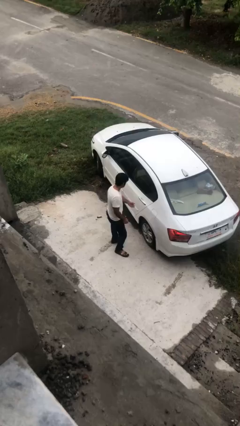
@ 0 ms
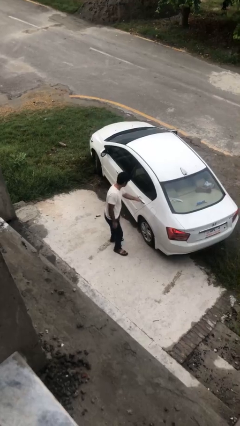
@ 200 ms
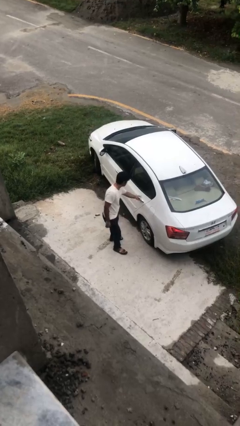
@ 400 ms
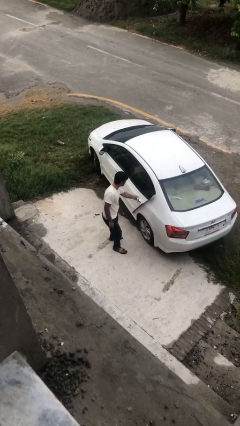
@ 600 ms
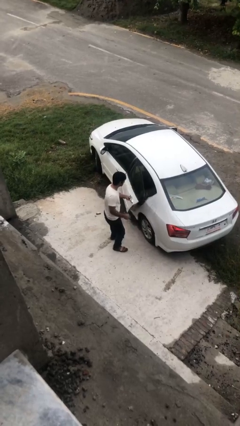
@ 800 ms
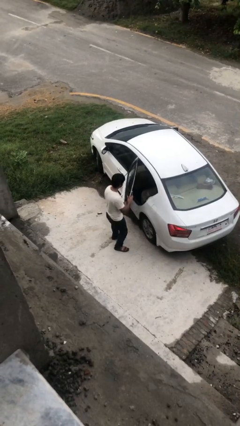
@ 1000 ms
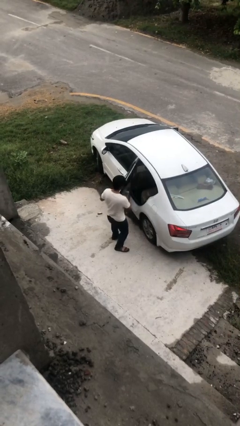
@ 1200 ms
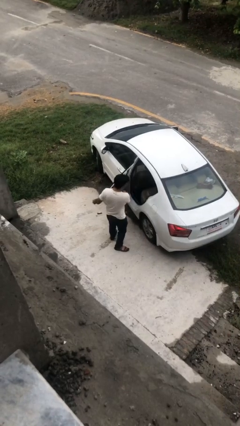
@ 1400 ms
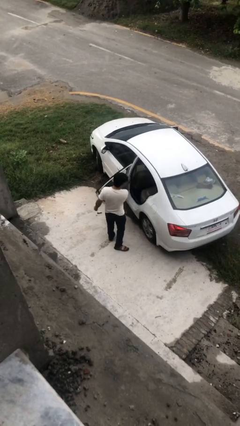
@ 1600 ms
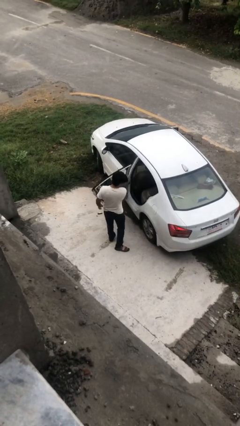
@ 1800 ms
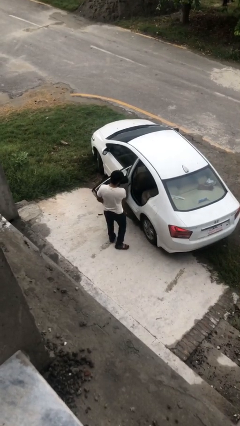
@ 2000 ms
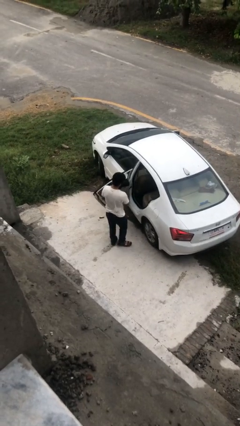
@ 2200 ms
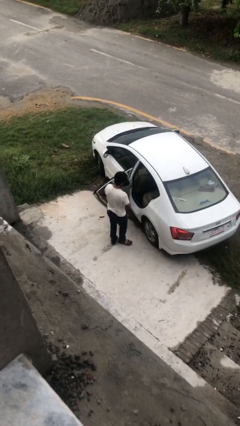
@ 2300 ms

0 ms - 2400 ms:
person opens car door

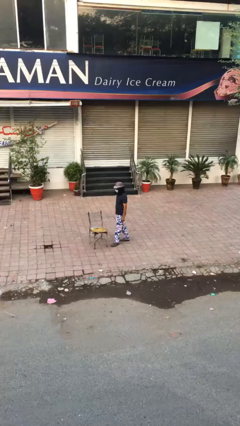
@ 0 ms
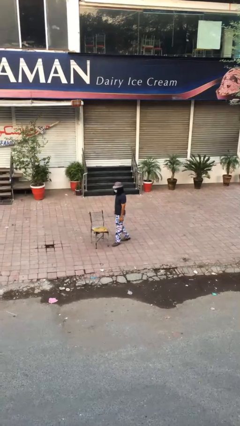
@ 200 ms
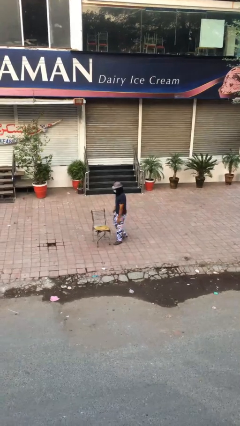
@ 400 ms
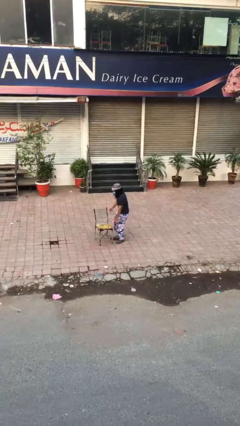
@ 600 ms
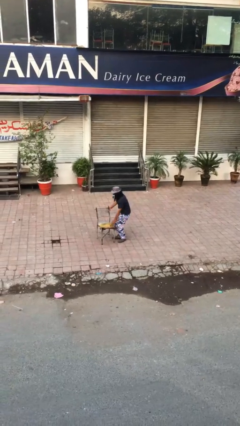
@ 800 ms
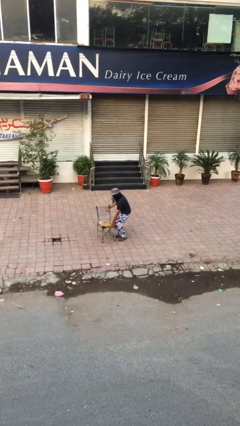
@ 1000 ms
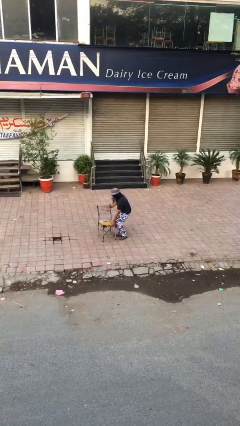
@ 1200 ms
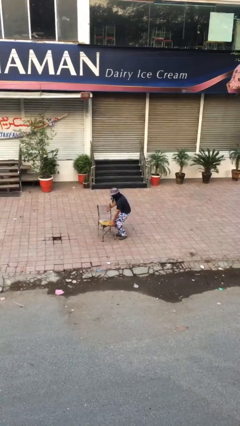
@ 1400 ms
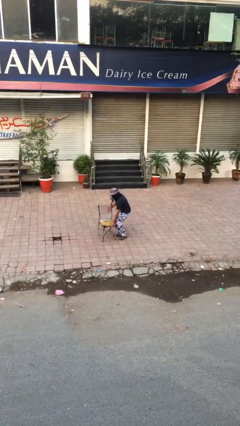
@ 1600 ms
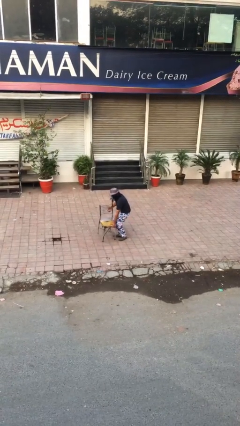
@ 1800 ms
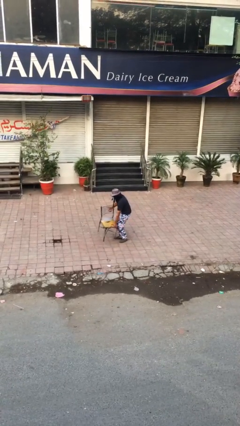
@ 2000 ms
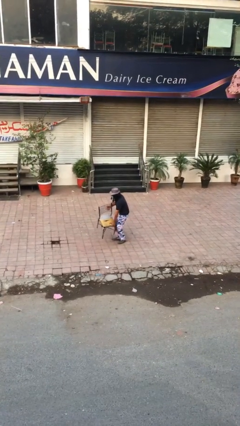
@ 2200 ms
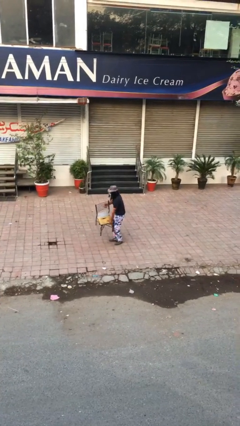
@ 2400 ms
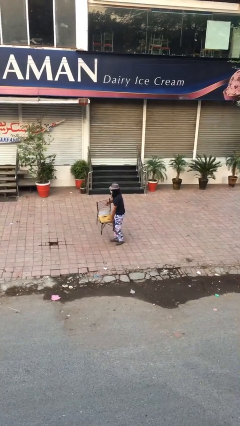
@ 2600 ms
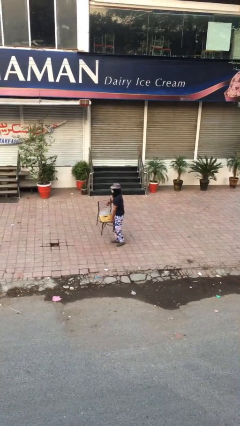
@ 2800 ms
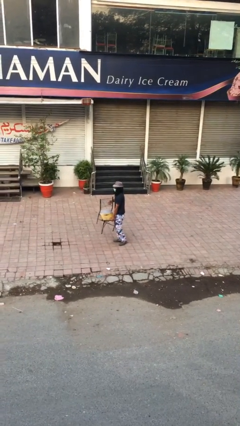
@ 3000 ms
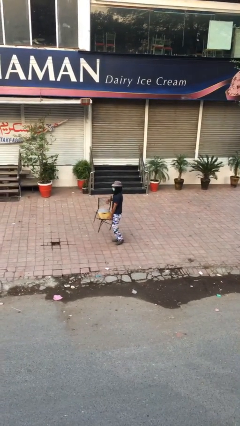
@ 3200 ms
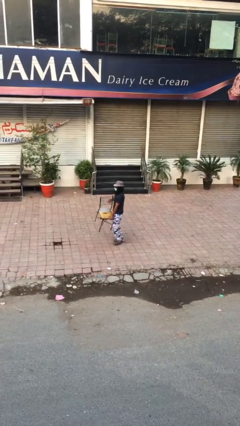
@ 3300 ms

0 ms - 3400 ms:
person picks up object from floor

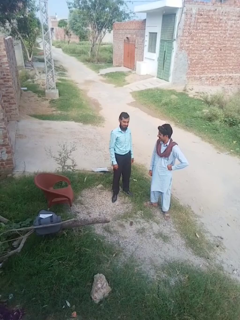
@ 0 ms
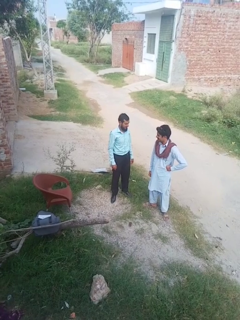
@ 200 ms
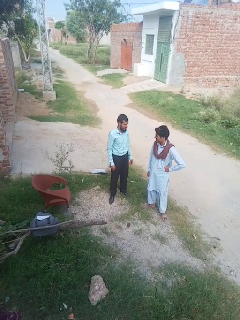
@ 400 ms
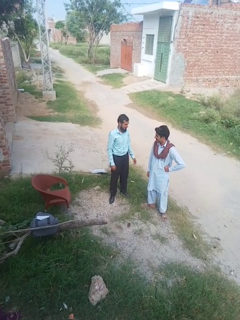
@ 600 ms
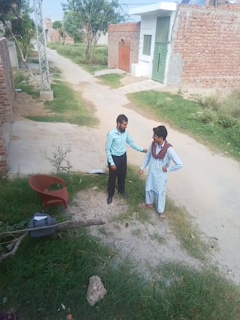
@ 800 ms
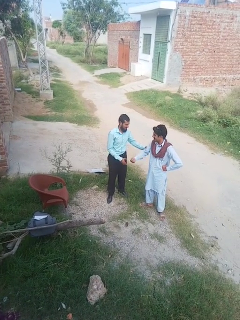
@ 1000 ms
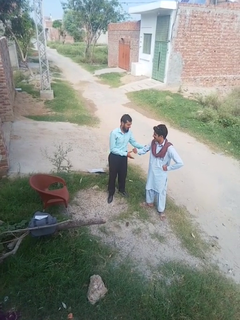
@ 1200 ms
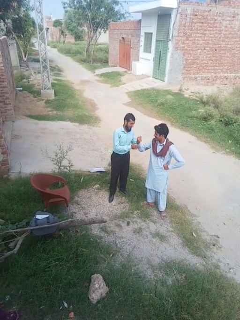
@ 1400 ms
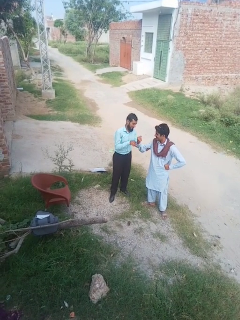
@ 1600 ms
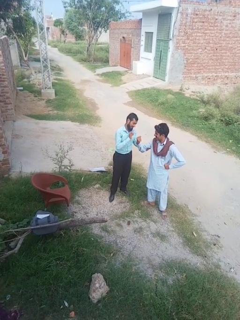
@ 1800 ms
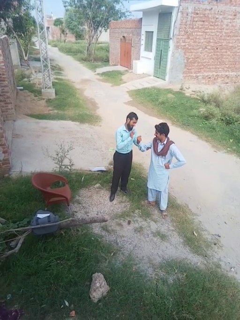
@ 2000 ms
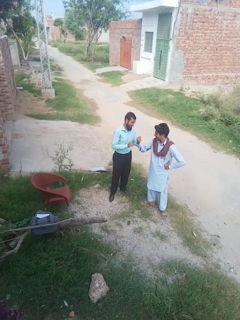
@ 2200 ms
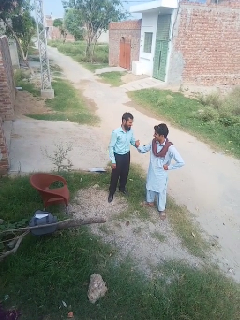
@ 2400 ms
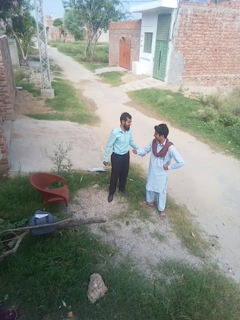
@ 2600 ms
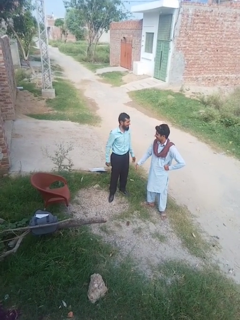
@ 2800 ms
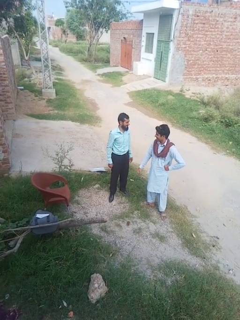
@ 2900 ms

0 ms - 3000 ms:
person grabs person by bicep

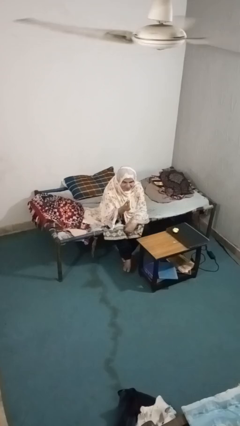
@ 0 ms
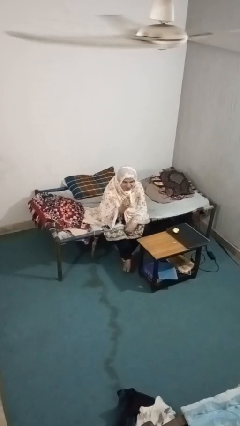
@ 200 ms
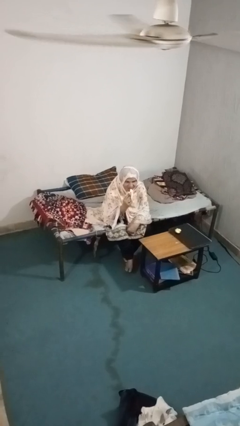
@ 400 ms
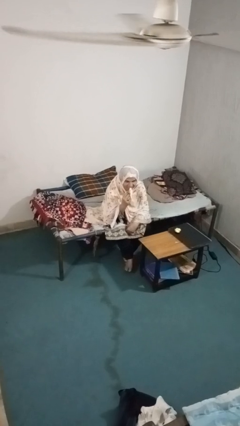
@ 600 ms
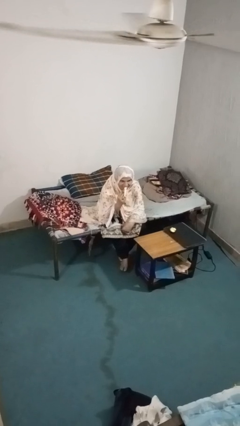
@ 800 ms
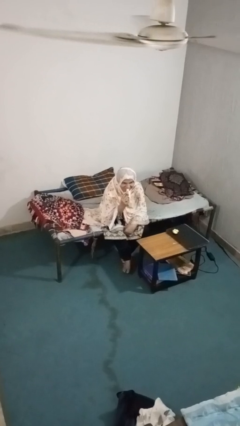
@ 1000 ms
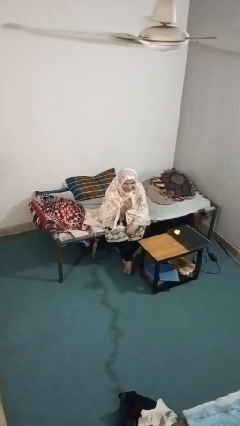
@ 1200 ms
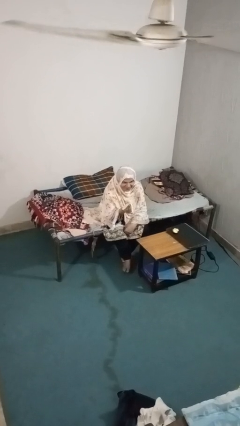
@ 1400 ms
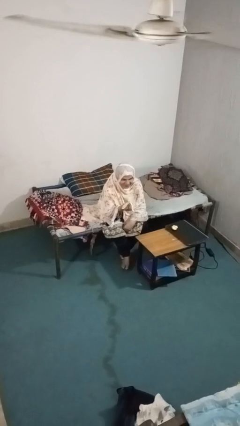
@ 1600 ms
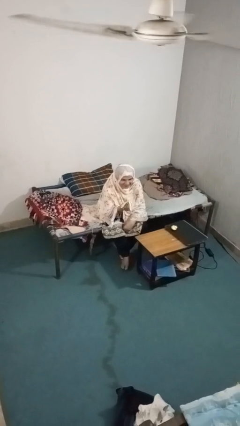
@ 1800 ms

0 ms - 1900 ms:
person eats banana

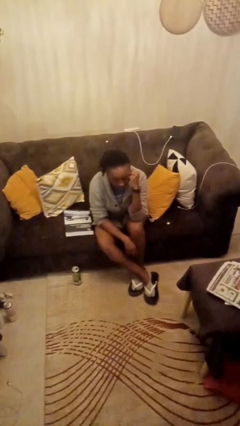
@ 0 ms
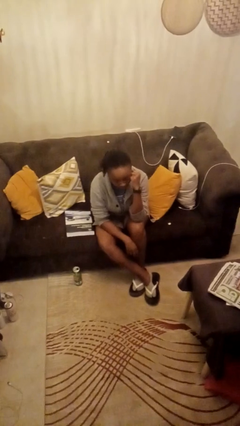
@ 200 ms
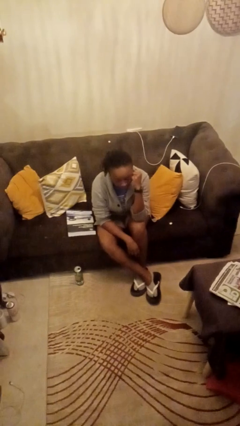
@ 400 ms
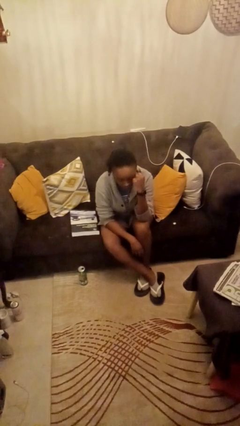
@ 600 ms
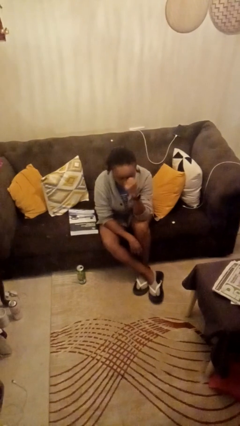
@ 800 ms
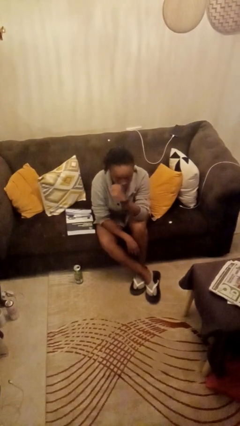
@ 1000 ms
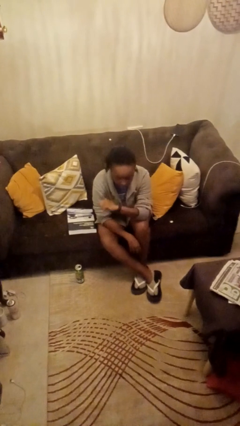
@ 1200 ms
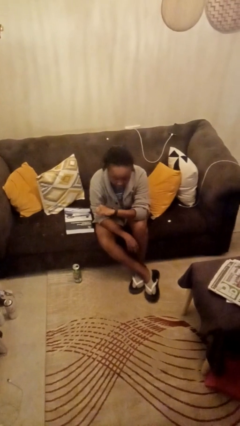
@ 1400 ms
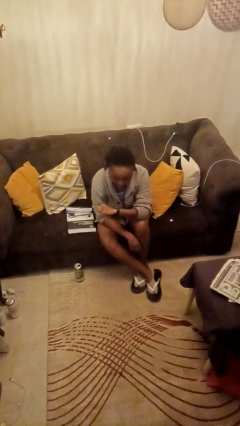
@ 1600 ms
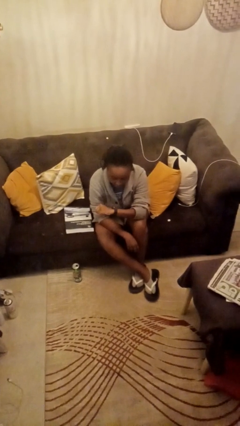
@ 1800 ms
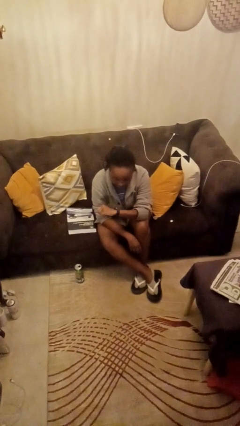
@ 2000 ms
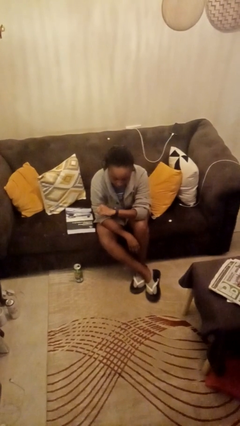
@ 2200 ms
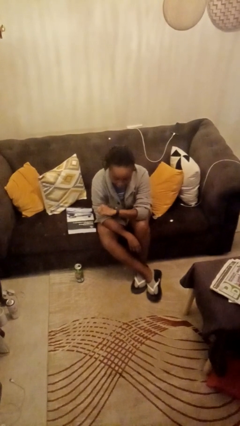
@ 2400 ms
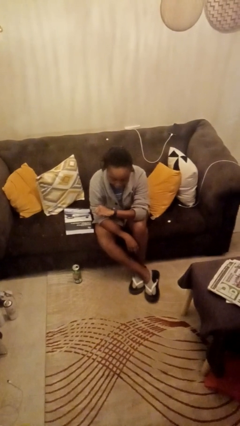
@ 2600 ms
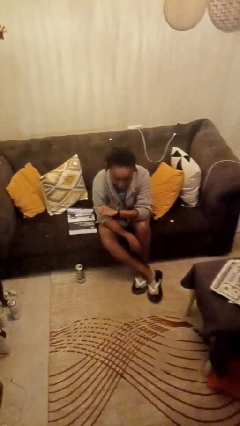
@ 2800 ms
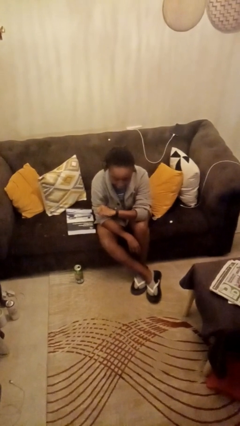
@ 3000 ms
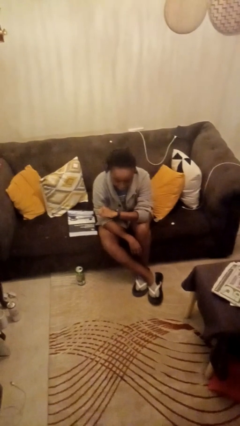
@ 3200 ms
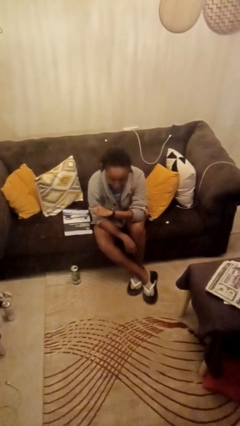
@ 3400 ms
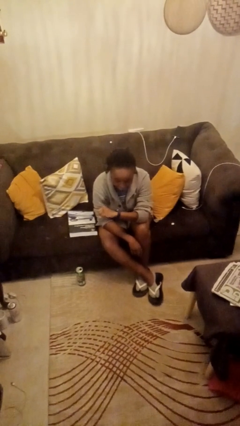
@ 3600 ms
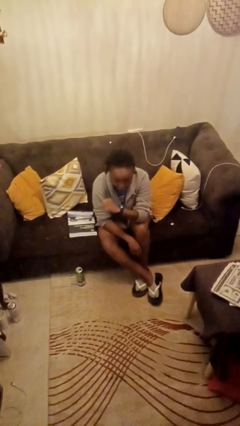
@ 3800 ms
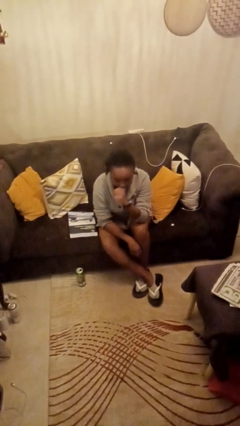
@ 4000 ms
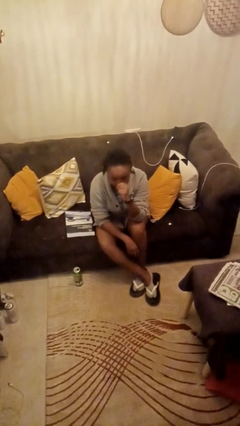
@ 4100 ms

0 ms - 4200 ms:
person looks at wristwatch

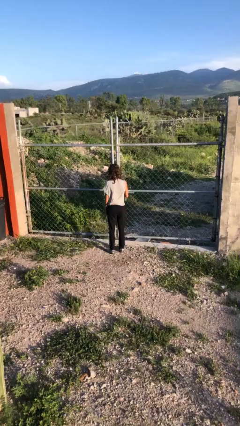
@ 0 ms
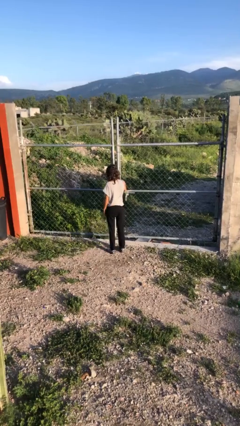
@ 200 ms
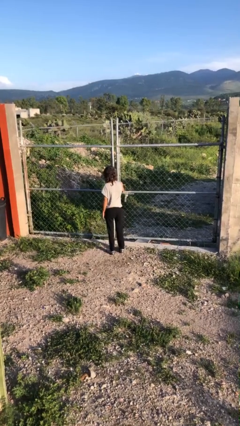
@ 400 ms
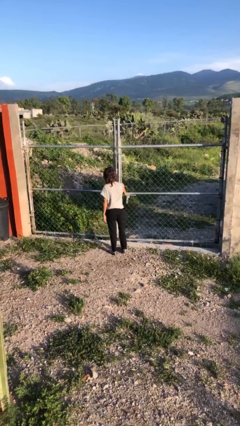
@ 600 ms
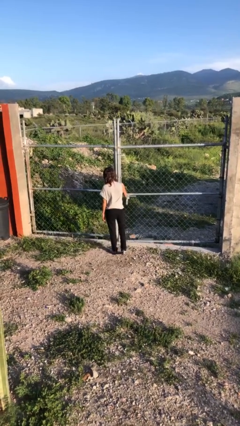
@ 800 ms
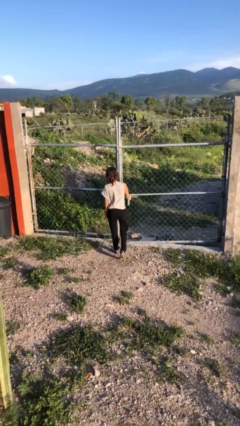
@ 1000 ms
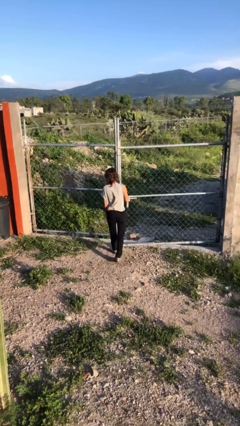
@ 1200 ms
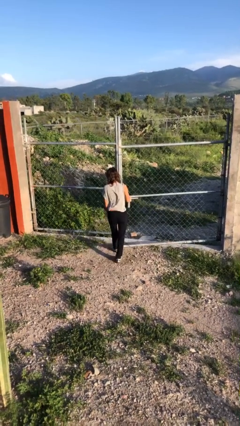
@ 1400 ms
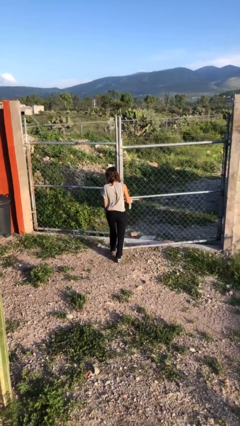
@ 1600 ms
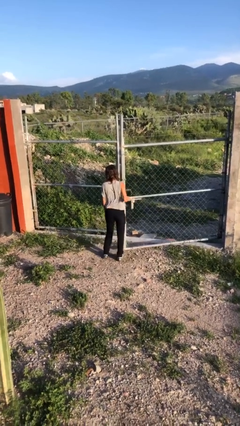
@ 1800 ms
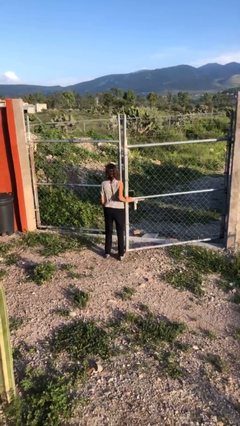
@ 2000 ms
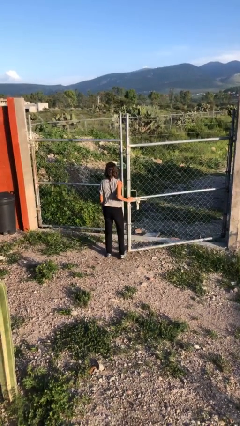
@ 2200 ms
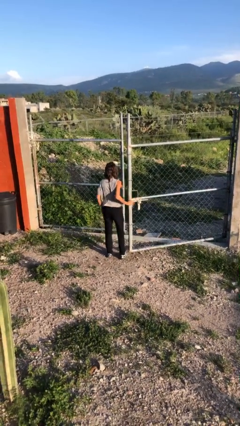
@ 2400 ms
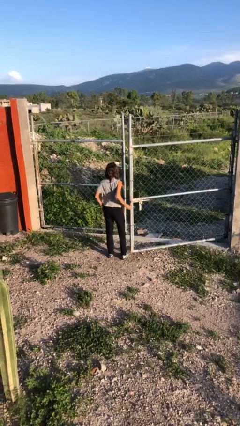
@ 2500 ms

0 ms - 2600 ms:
person opens gate

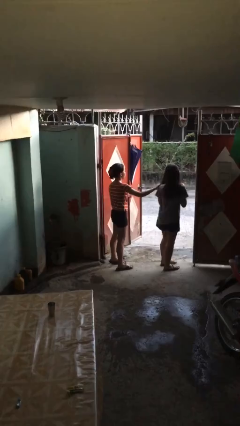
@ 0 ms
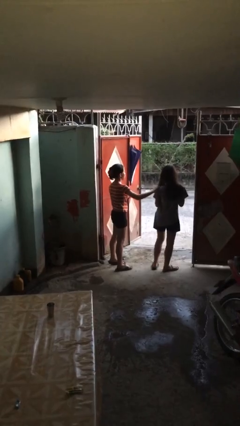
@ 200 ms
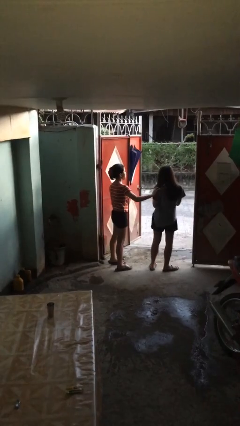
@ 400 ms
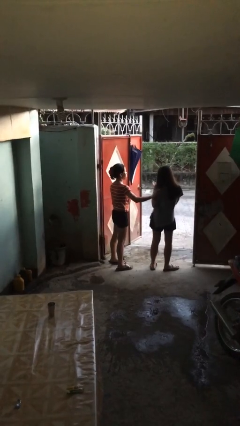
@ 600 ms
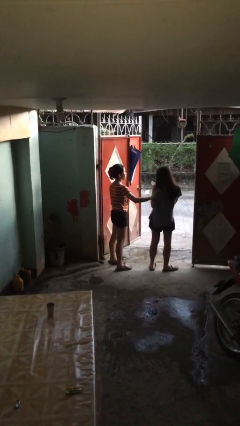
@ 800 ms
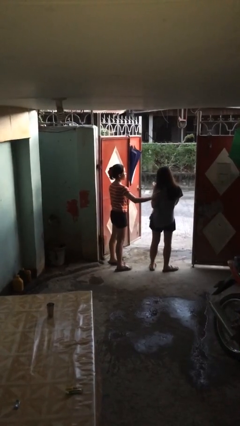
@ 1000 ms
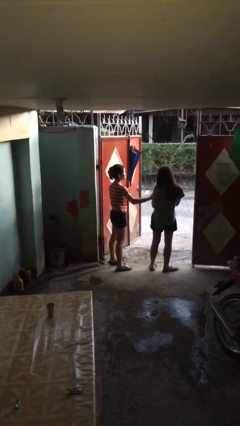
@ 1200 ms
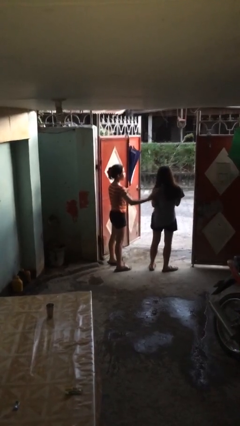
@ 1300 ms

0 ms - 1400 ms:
person spins person around
